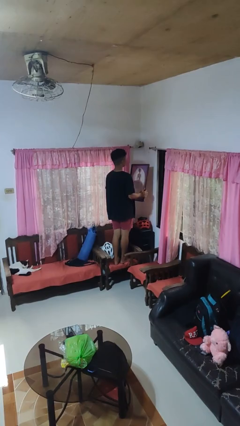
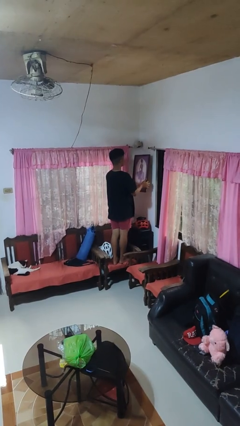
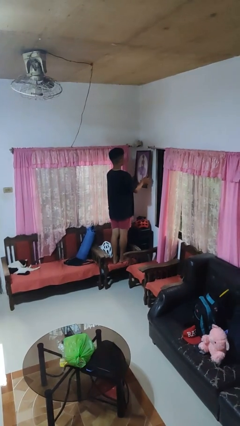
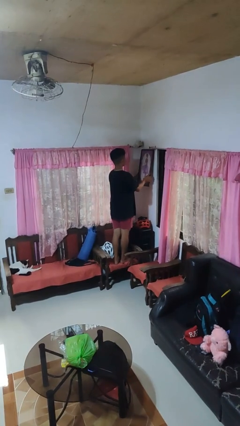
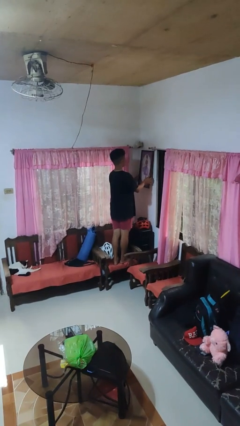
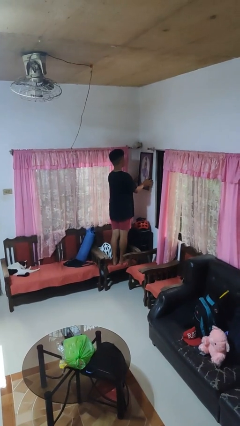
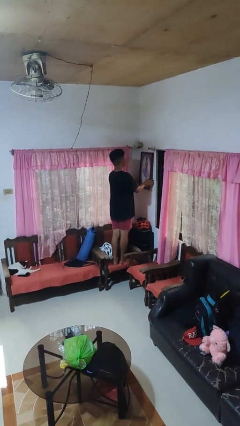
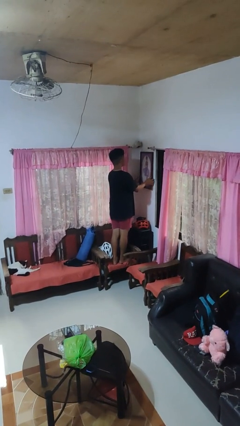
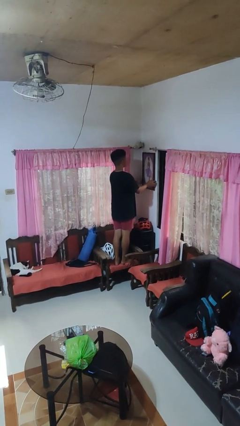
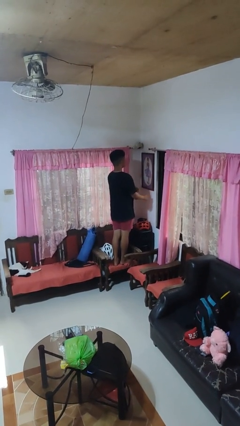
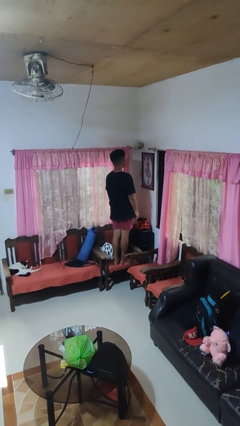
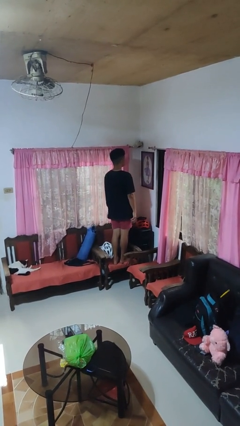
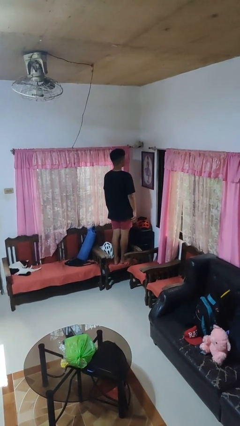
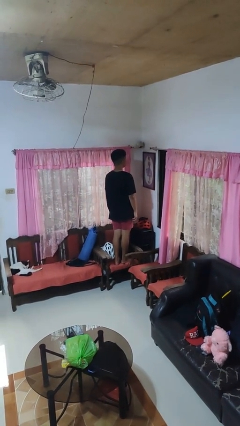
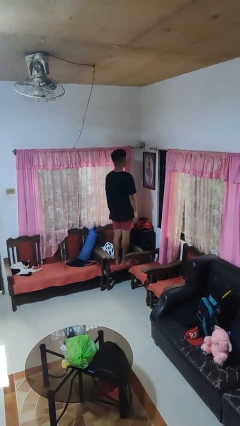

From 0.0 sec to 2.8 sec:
person puts up picture frame

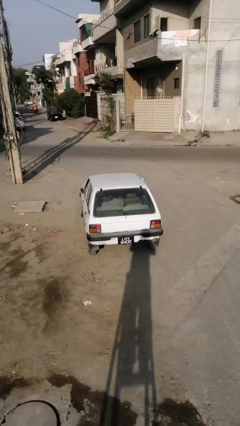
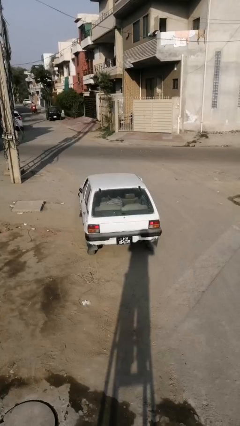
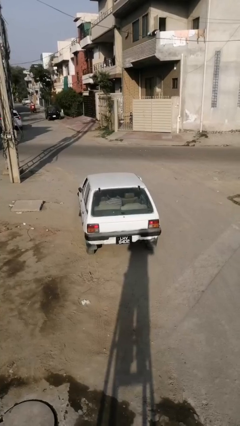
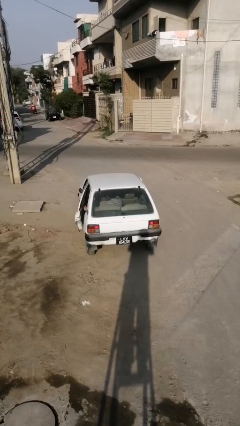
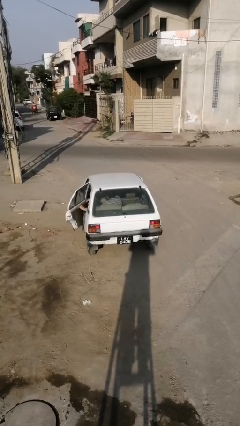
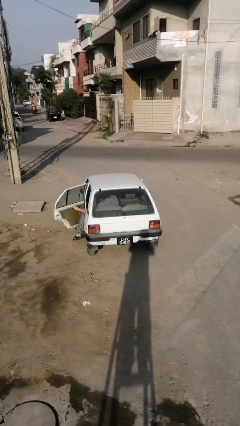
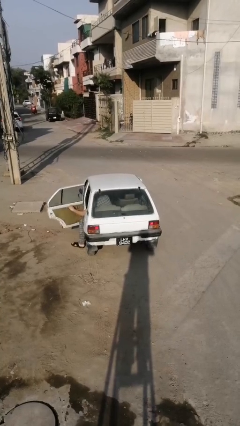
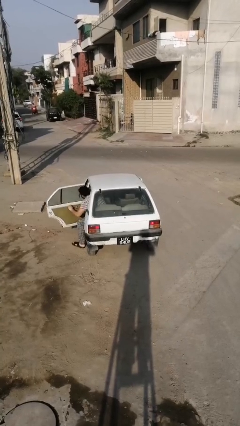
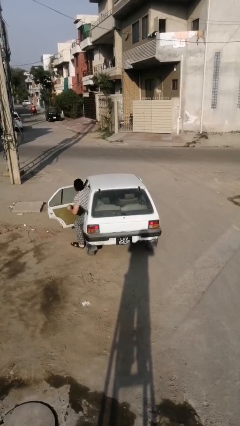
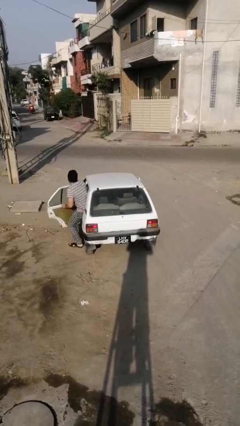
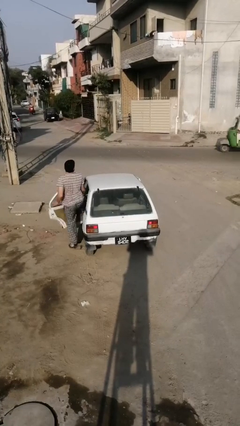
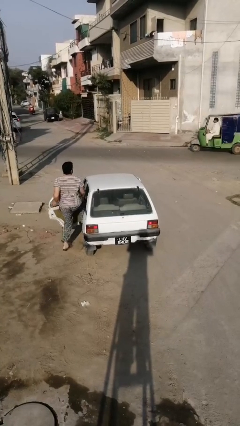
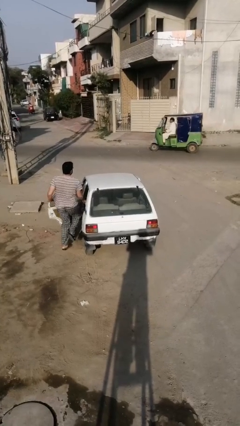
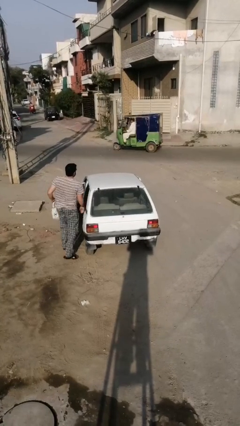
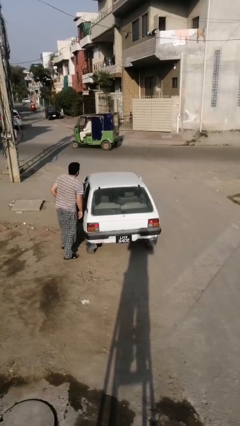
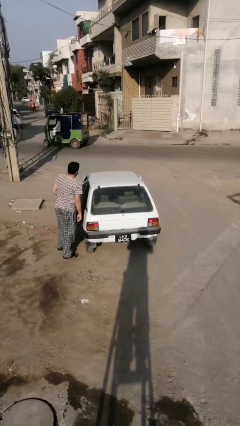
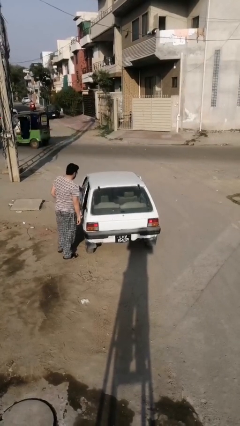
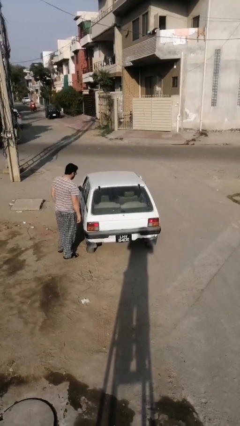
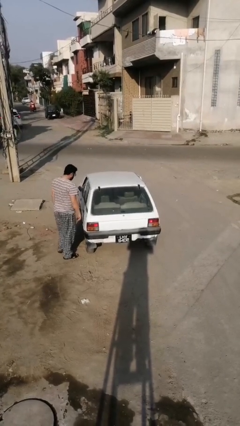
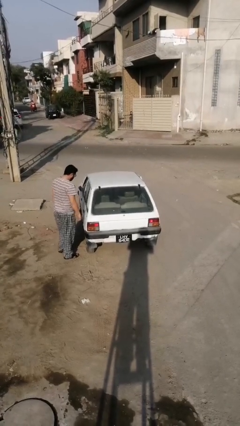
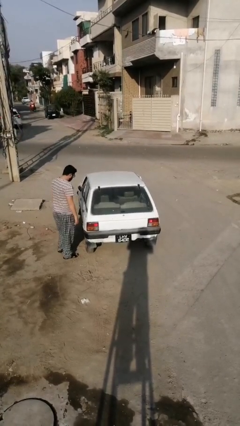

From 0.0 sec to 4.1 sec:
car drops off person

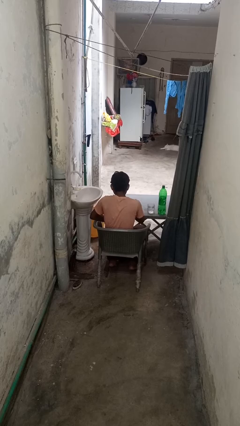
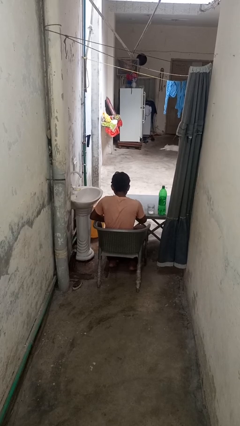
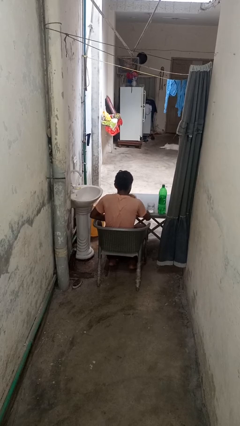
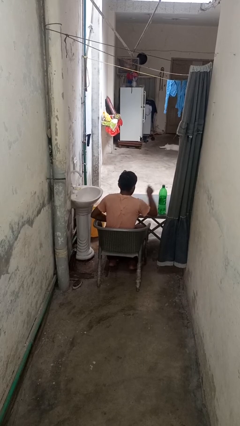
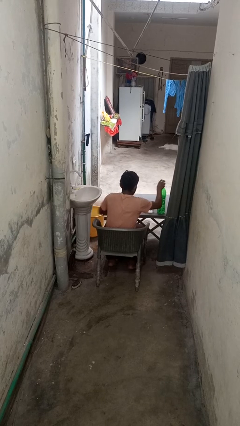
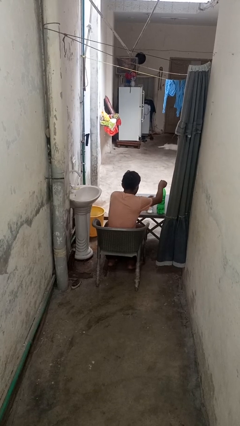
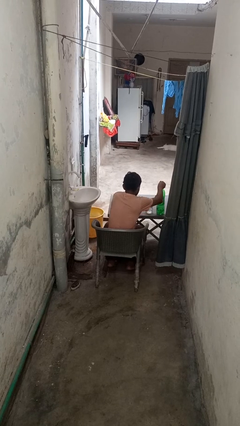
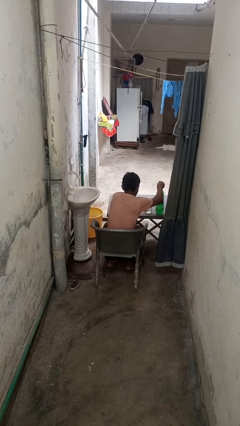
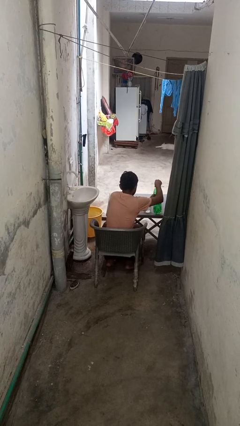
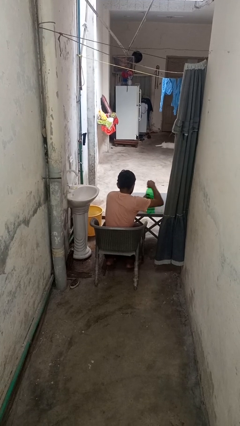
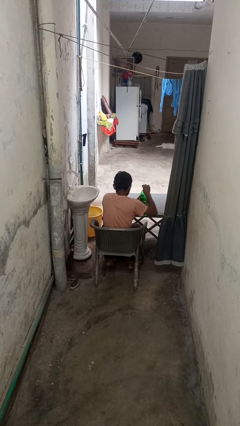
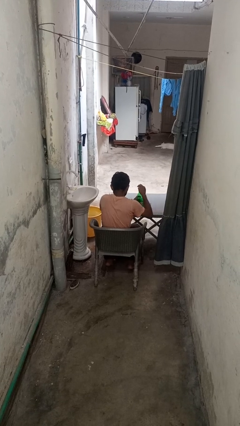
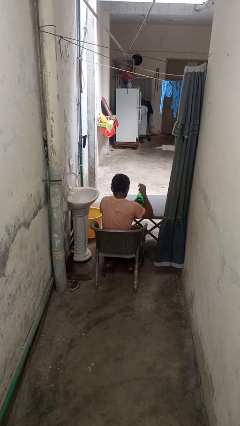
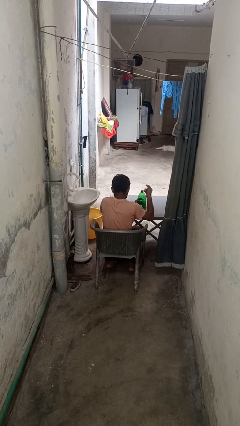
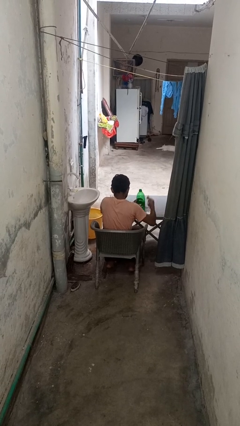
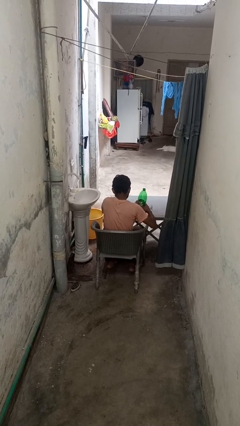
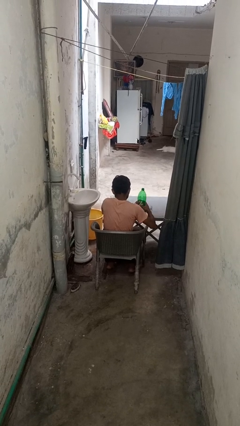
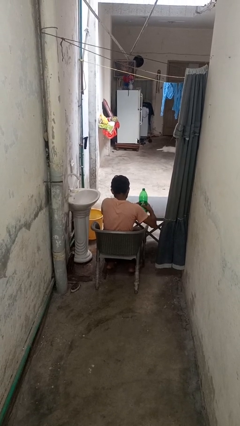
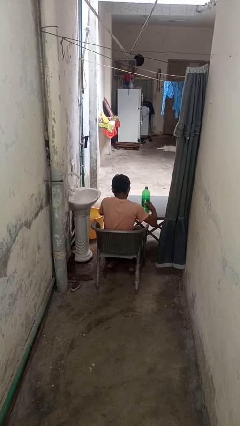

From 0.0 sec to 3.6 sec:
person unscrews lid from bottle

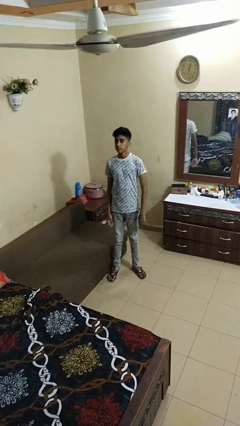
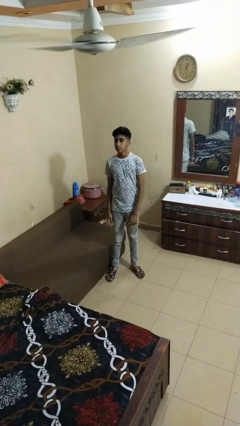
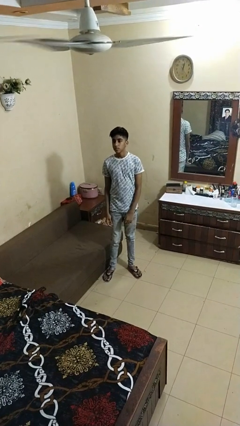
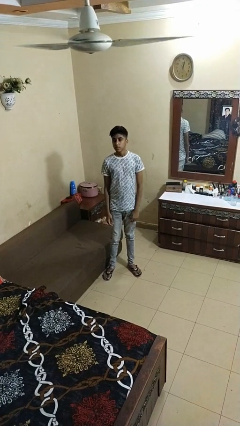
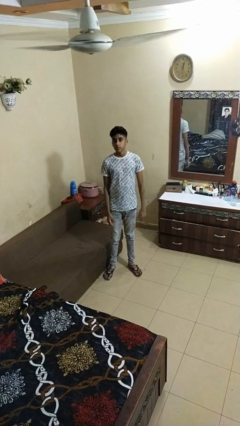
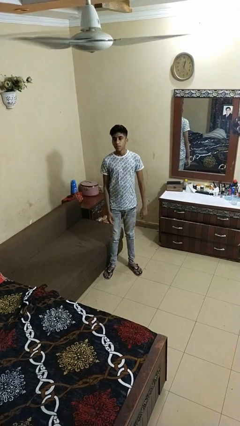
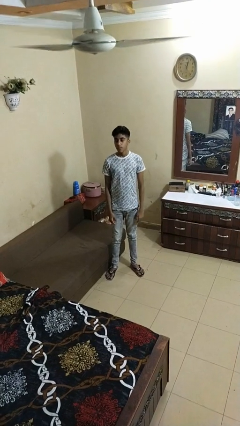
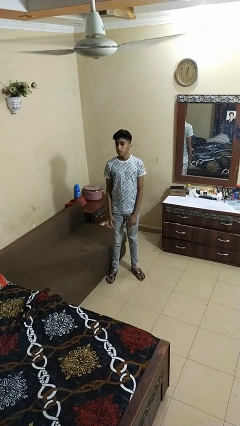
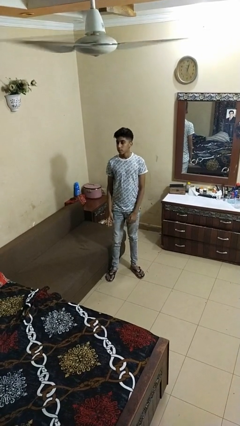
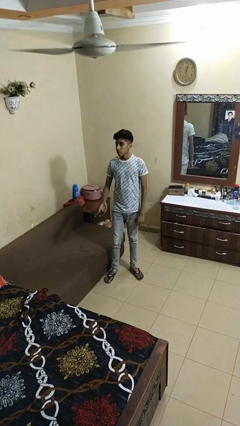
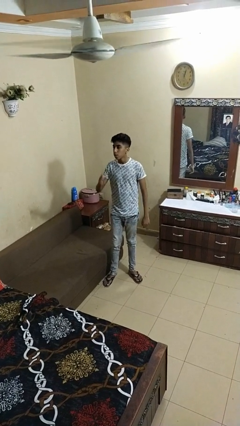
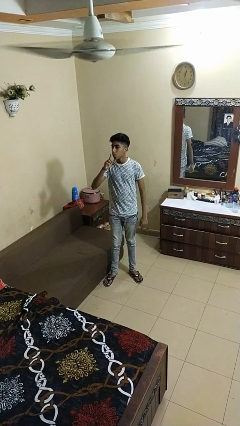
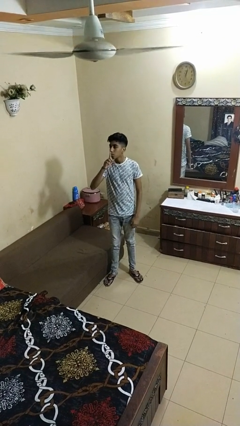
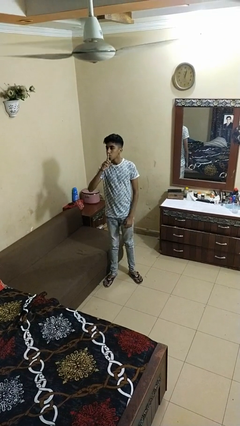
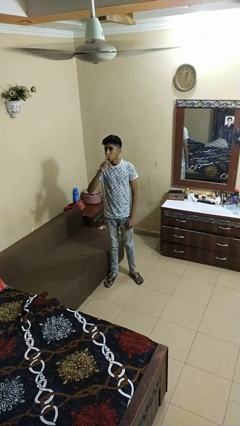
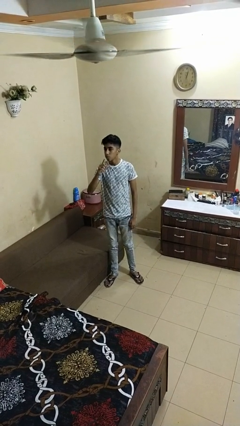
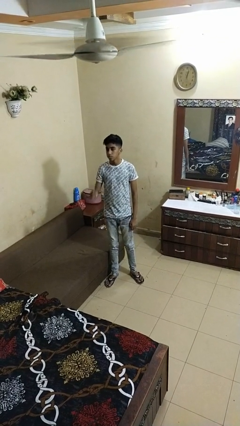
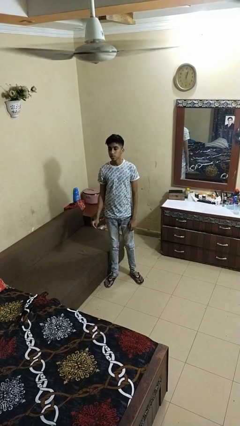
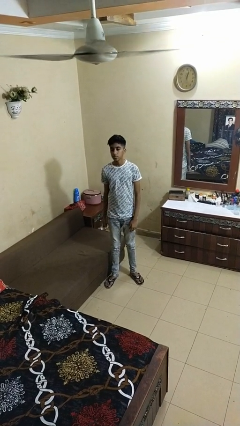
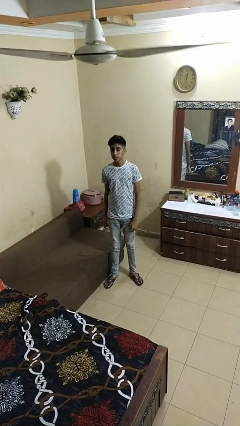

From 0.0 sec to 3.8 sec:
person gestures be quiet

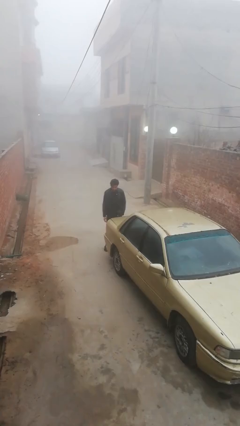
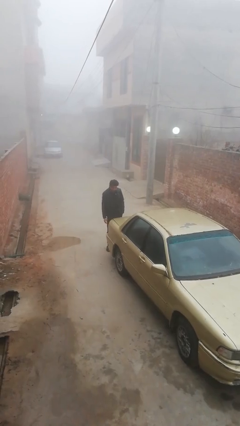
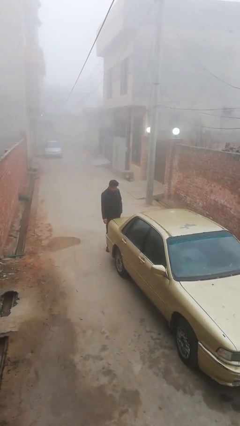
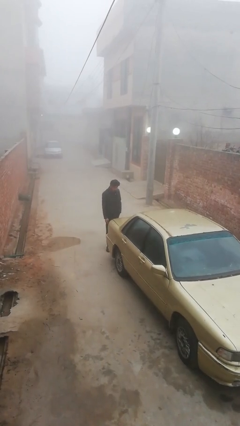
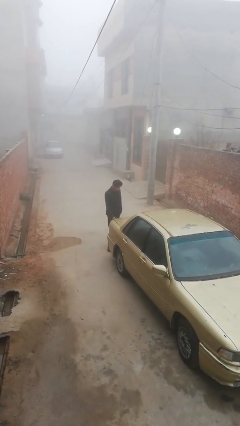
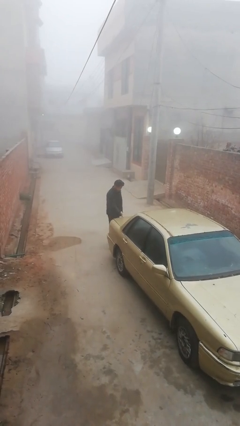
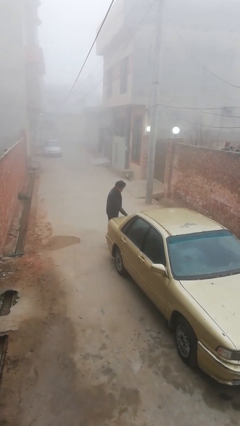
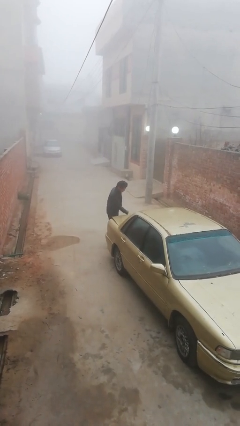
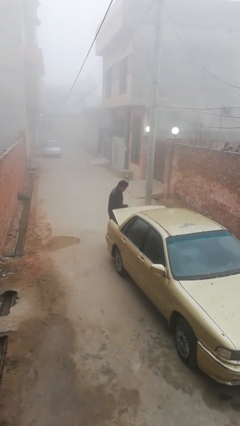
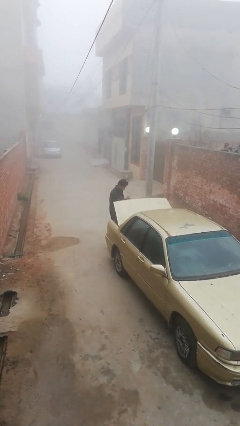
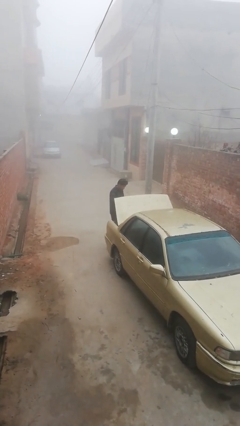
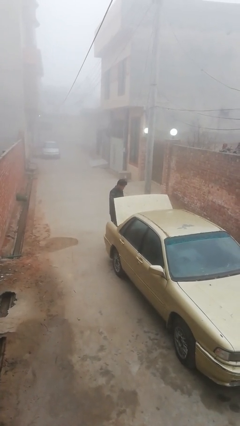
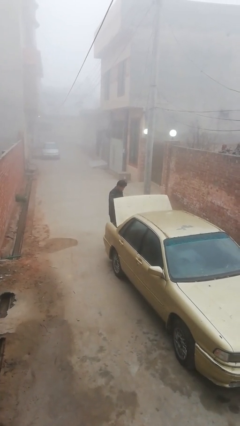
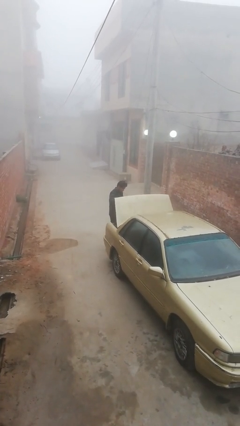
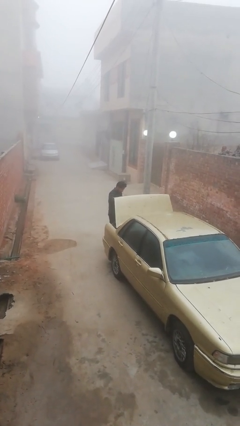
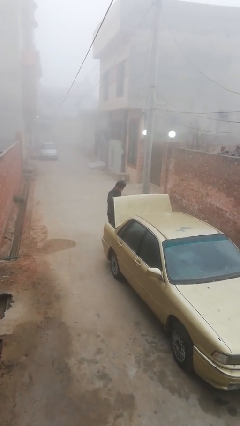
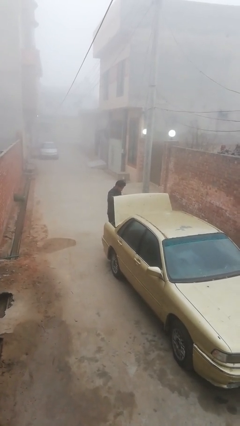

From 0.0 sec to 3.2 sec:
person opens car trunk

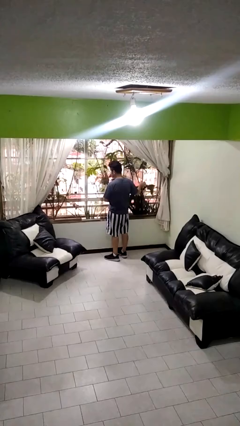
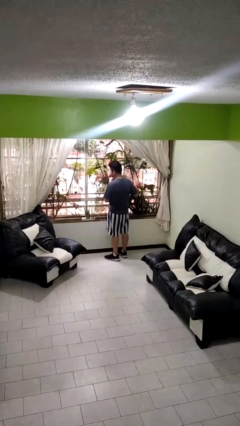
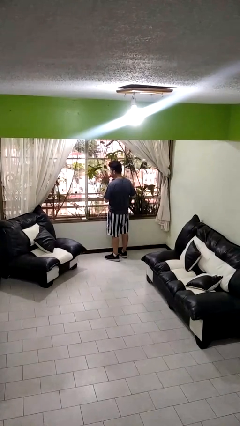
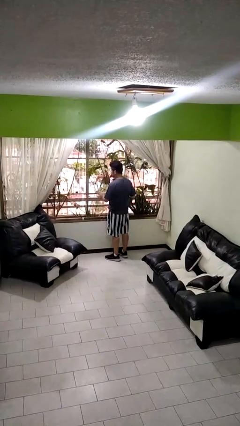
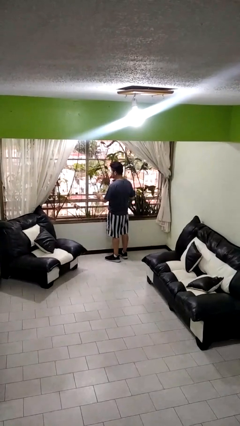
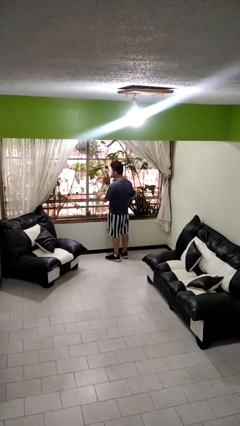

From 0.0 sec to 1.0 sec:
person closes home window
